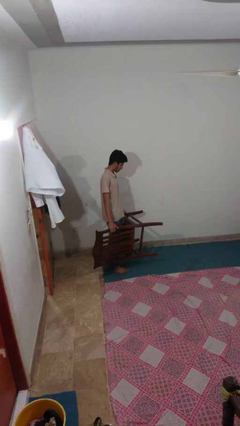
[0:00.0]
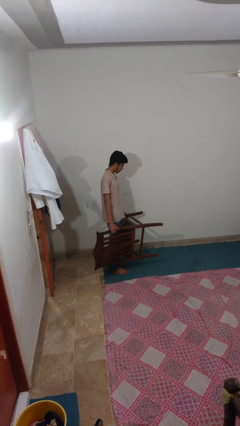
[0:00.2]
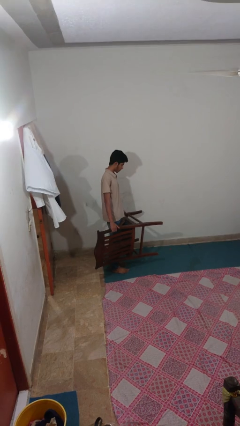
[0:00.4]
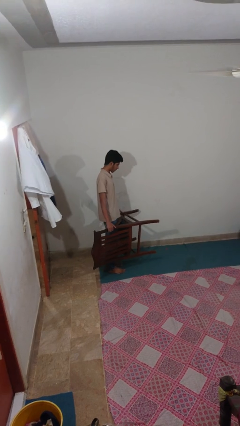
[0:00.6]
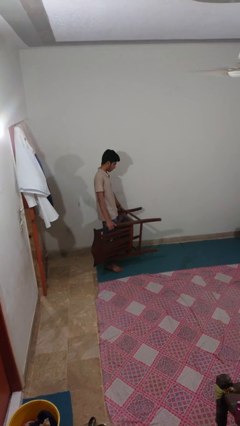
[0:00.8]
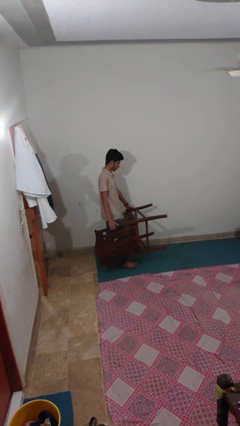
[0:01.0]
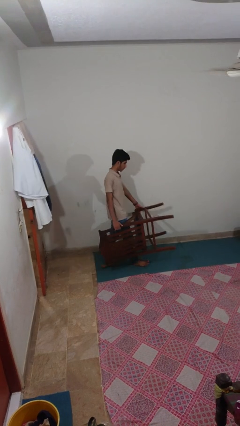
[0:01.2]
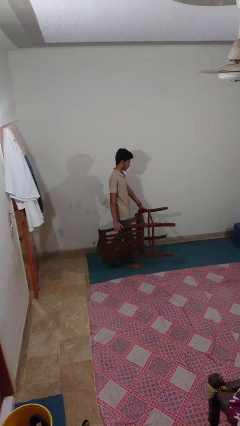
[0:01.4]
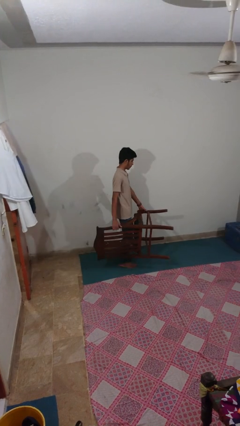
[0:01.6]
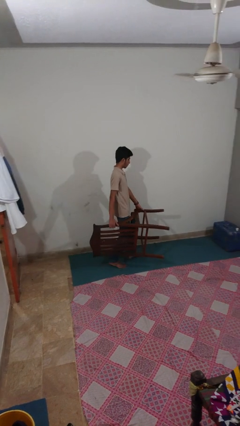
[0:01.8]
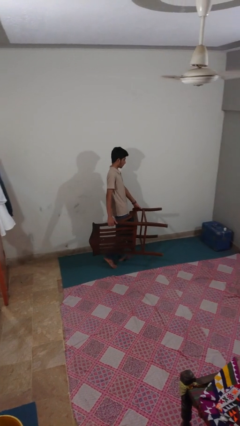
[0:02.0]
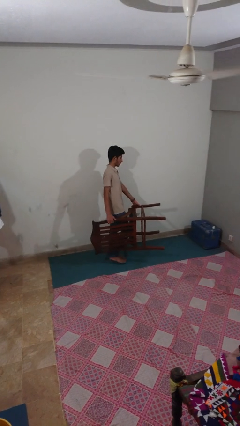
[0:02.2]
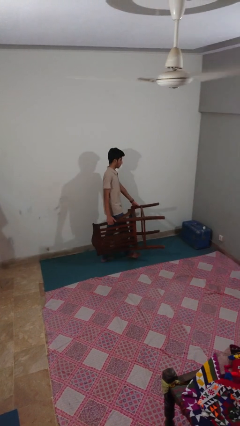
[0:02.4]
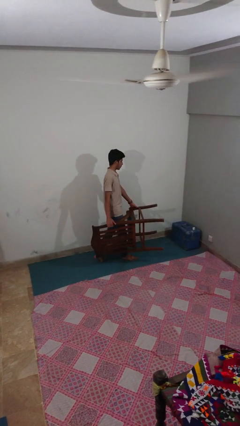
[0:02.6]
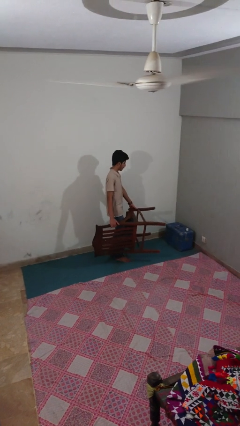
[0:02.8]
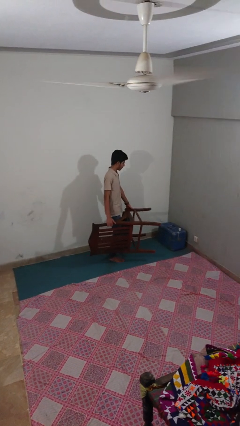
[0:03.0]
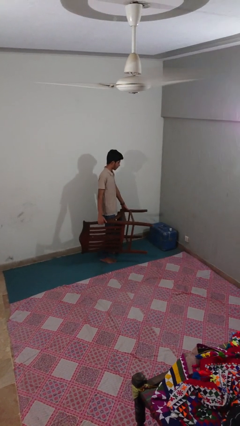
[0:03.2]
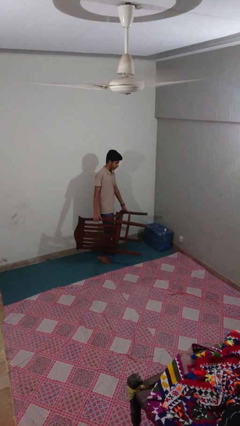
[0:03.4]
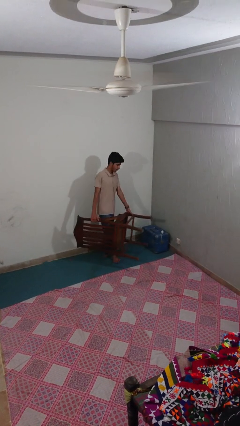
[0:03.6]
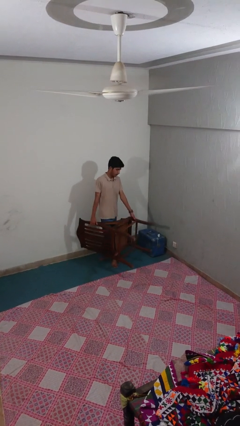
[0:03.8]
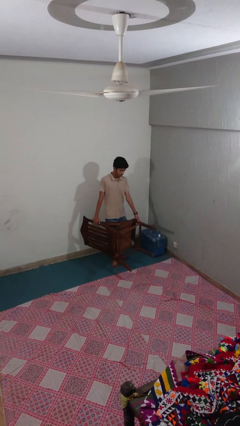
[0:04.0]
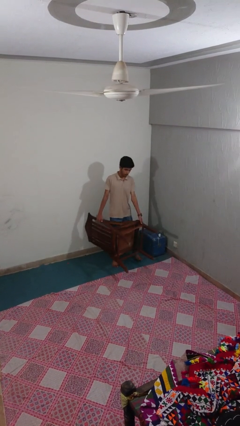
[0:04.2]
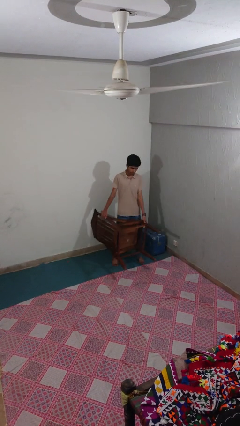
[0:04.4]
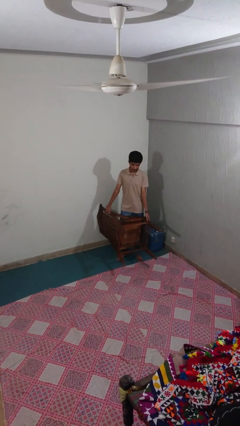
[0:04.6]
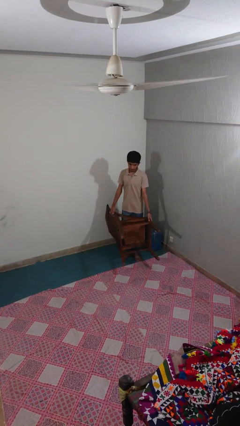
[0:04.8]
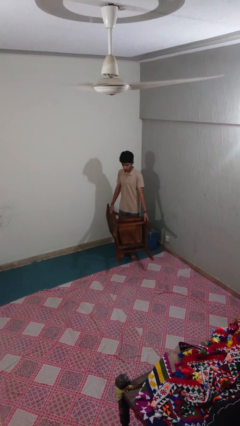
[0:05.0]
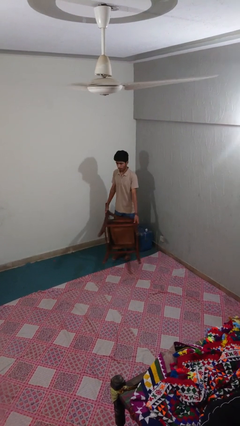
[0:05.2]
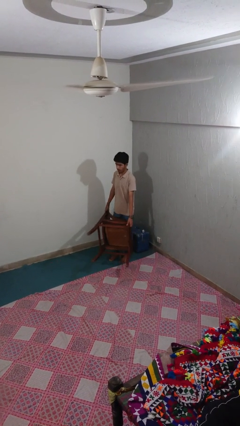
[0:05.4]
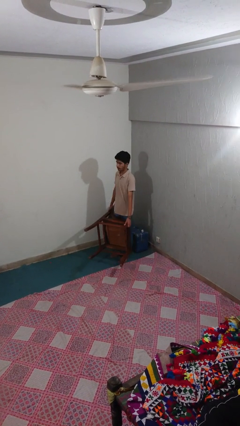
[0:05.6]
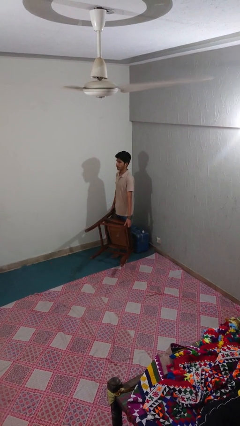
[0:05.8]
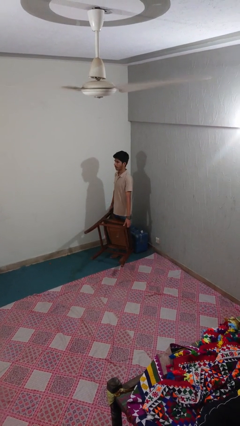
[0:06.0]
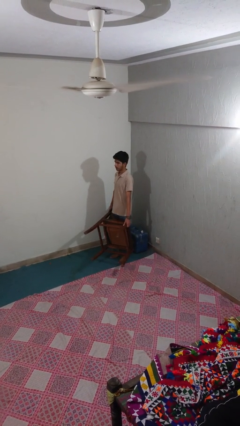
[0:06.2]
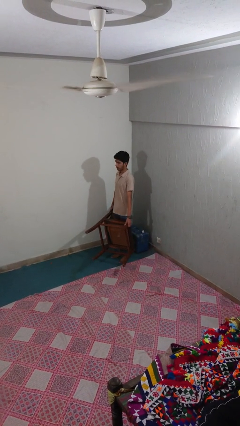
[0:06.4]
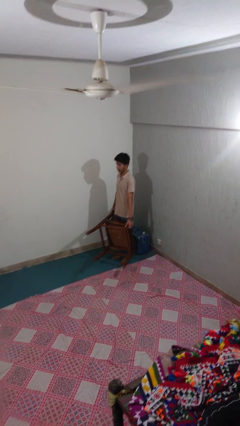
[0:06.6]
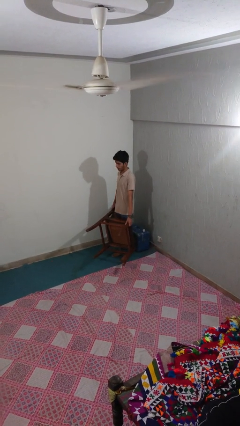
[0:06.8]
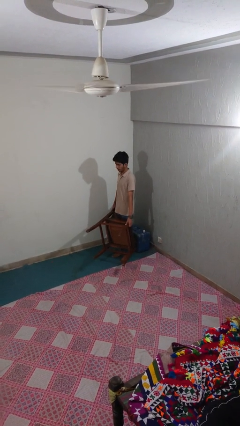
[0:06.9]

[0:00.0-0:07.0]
person carries furniture

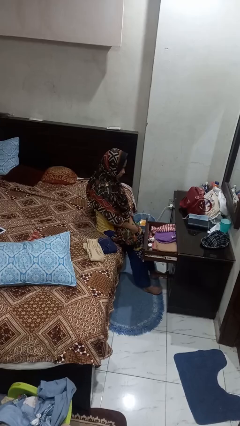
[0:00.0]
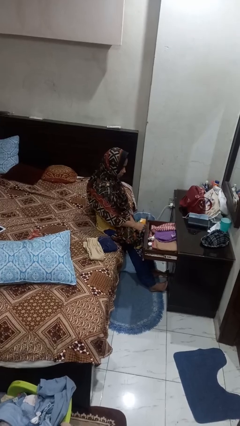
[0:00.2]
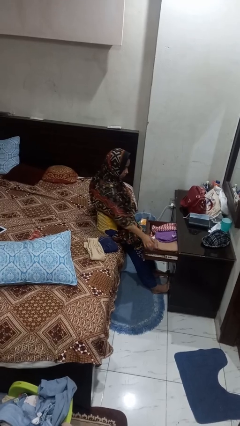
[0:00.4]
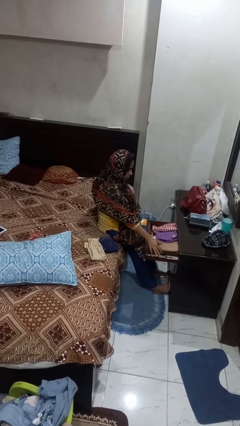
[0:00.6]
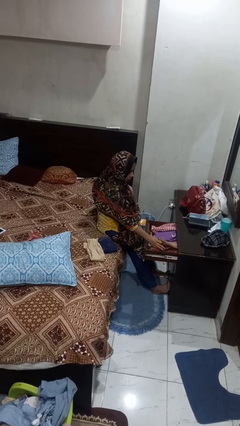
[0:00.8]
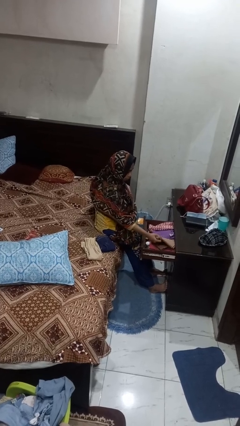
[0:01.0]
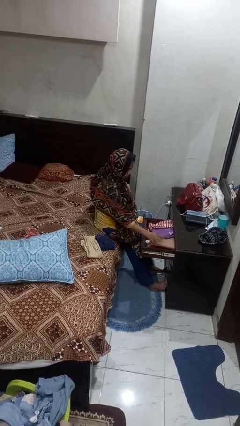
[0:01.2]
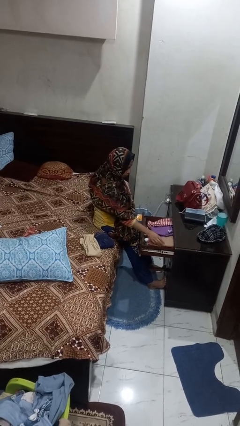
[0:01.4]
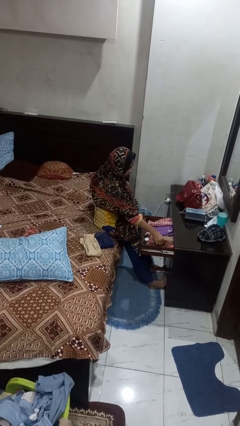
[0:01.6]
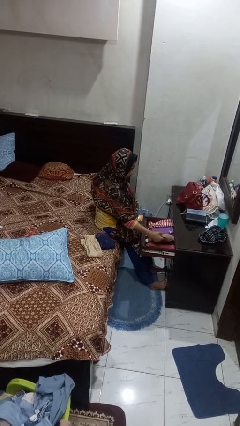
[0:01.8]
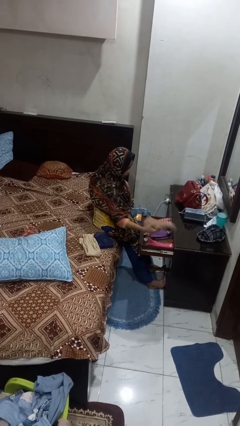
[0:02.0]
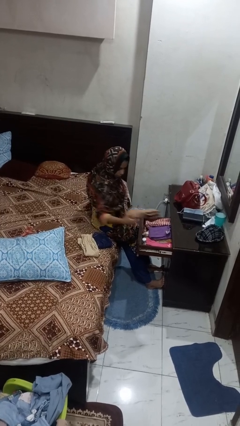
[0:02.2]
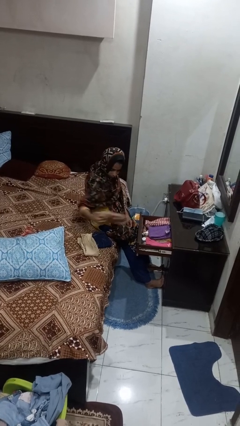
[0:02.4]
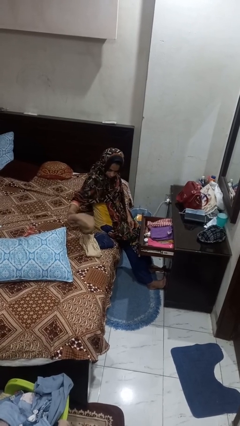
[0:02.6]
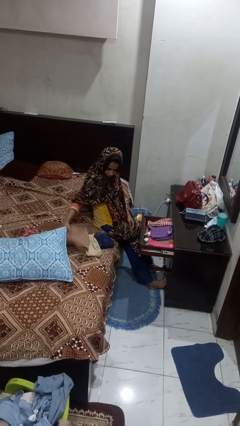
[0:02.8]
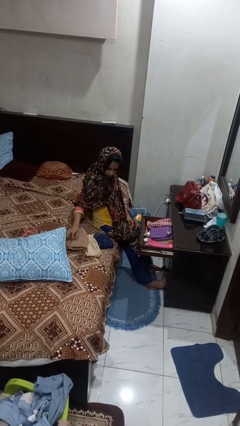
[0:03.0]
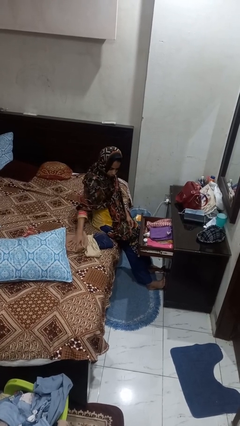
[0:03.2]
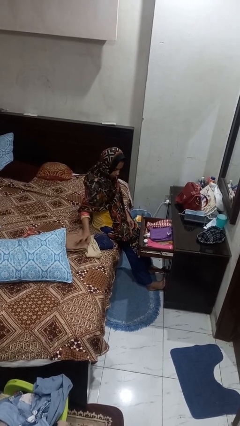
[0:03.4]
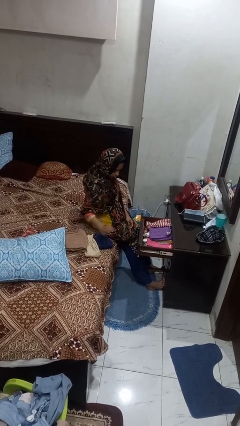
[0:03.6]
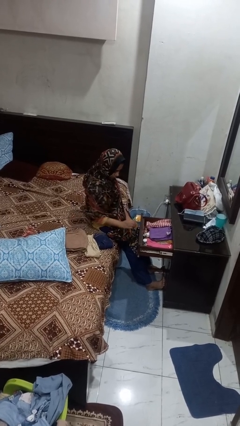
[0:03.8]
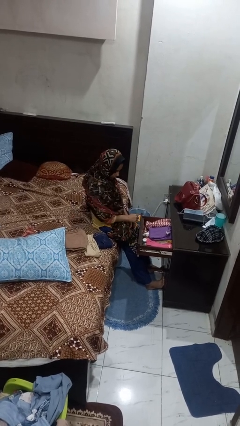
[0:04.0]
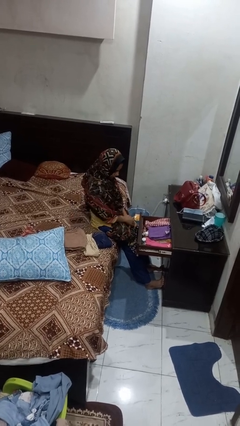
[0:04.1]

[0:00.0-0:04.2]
person takes clothes from dresser

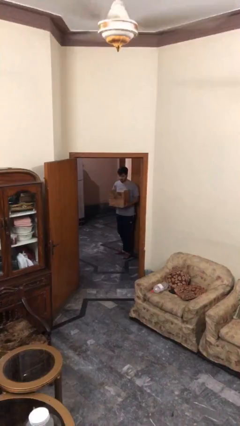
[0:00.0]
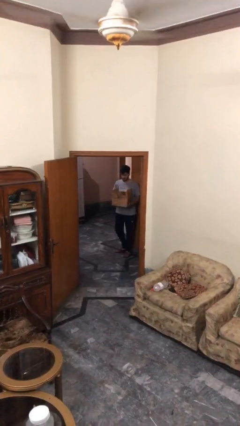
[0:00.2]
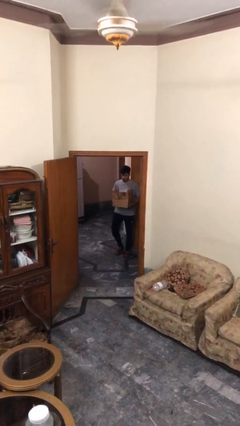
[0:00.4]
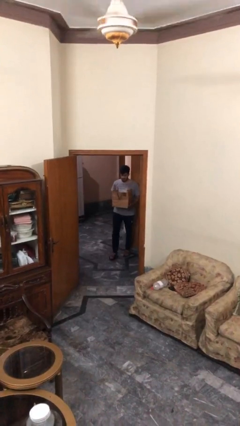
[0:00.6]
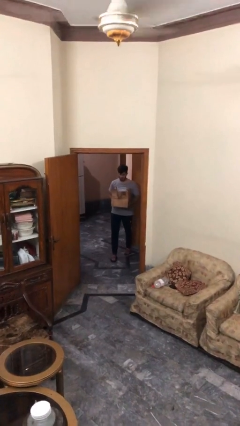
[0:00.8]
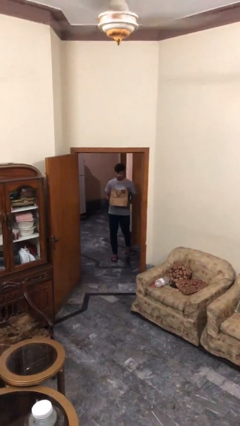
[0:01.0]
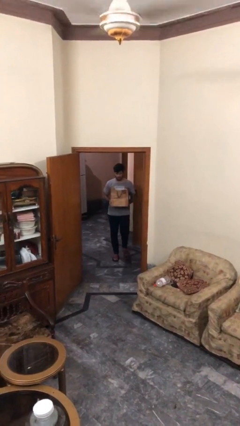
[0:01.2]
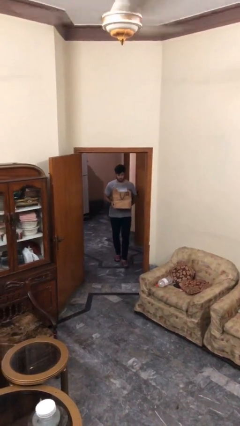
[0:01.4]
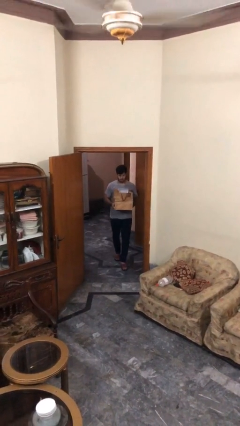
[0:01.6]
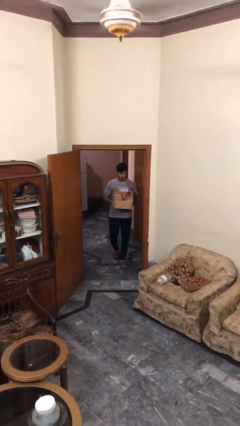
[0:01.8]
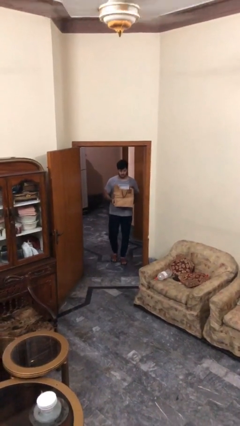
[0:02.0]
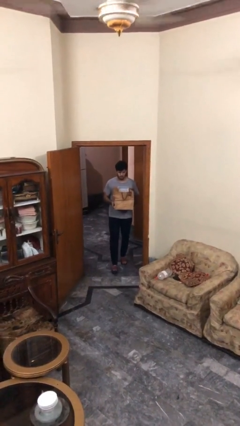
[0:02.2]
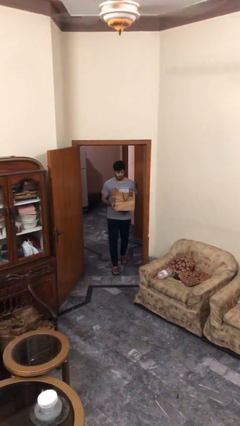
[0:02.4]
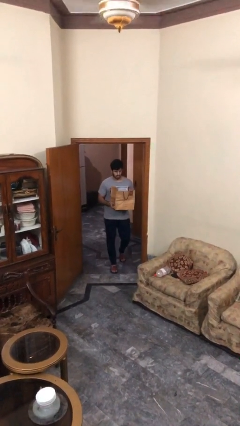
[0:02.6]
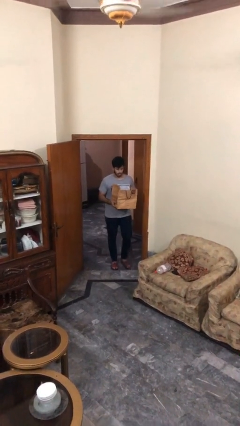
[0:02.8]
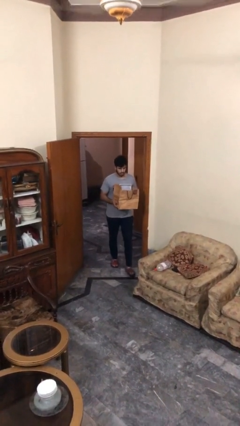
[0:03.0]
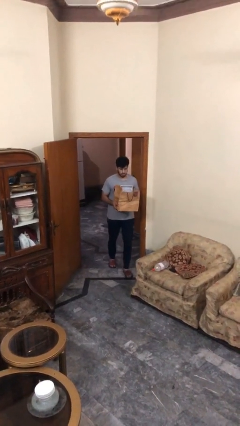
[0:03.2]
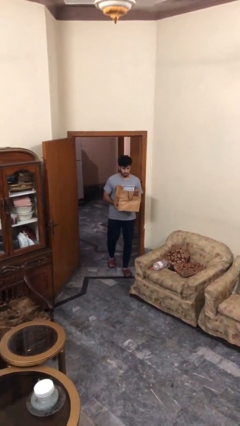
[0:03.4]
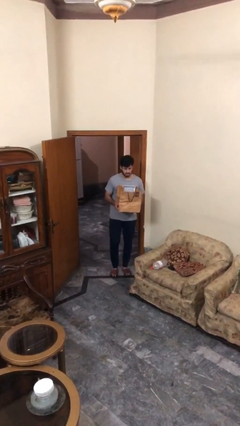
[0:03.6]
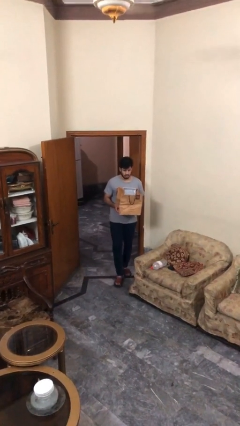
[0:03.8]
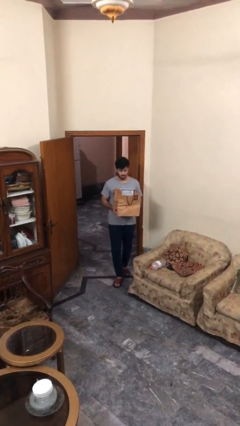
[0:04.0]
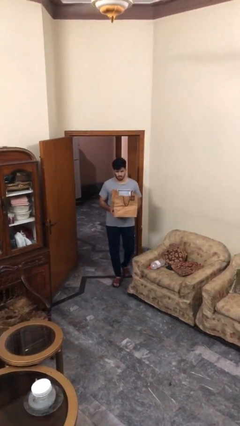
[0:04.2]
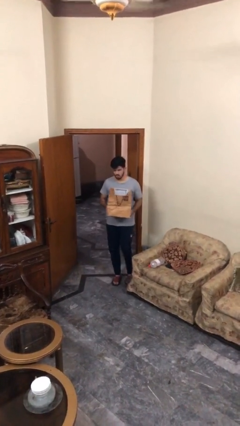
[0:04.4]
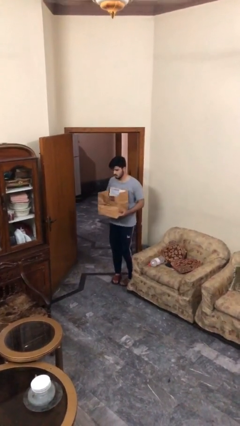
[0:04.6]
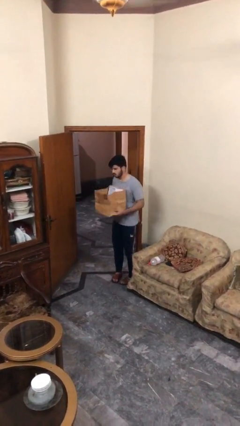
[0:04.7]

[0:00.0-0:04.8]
person carries groceries

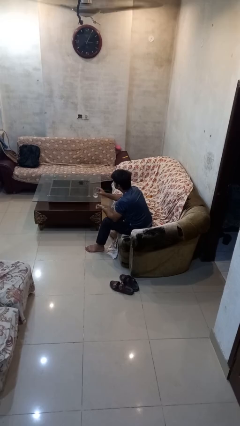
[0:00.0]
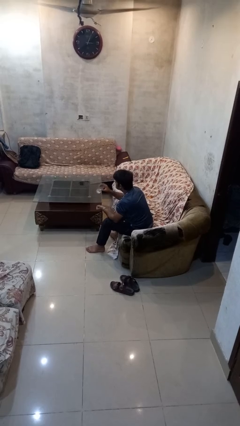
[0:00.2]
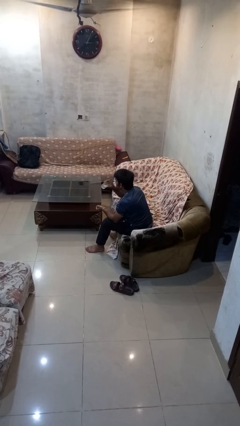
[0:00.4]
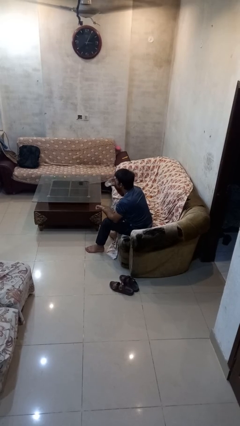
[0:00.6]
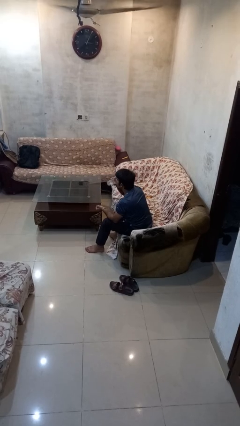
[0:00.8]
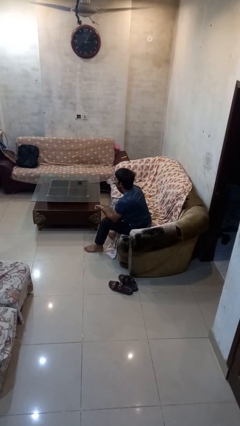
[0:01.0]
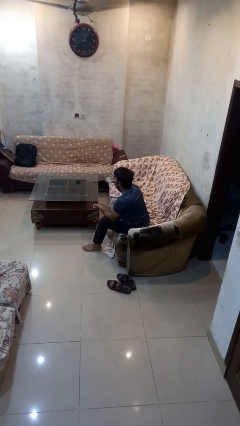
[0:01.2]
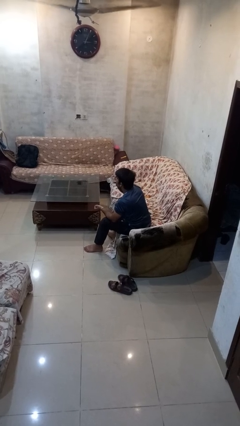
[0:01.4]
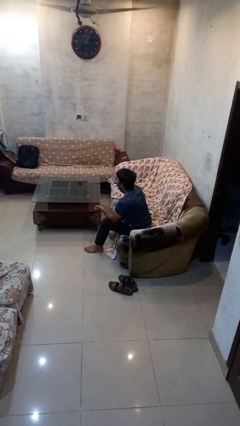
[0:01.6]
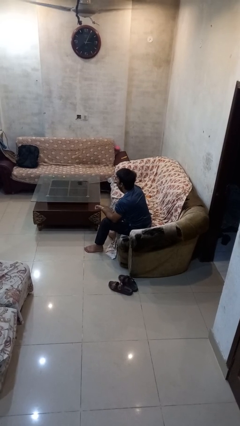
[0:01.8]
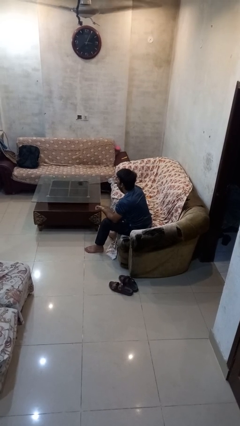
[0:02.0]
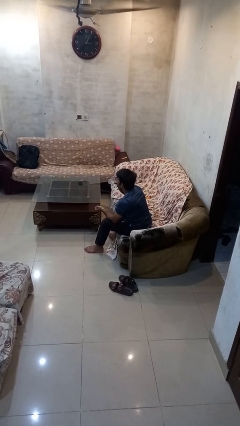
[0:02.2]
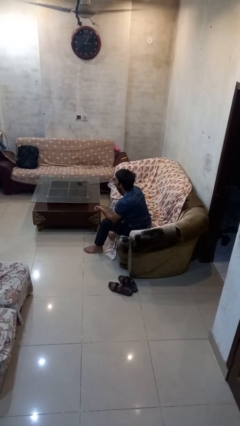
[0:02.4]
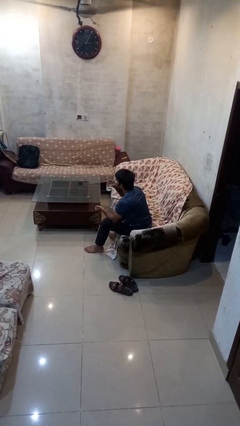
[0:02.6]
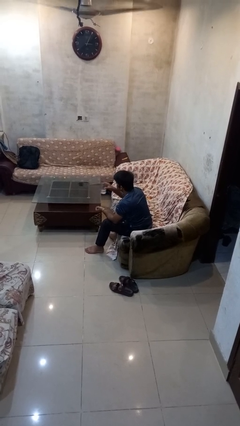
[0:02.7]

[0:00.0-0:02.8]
person drinks from cup
